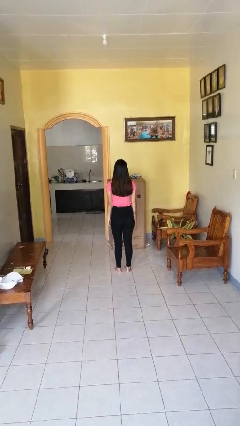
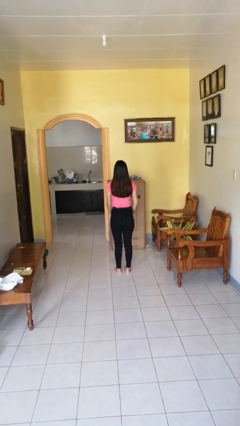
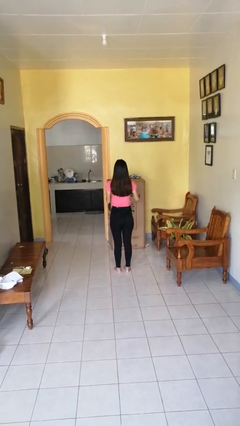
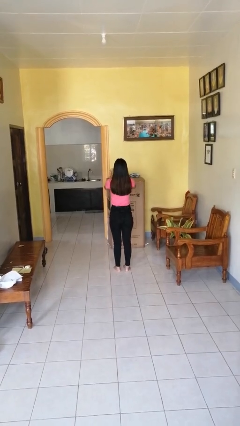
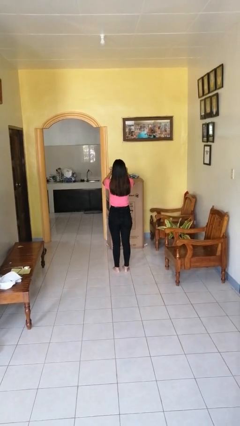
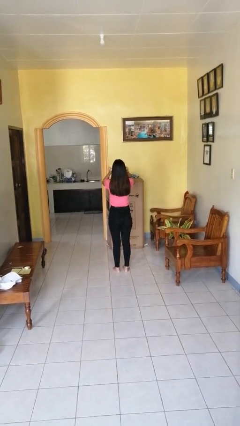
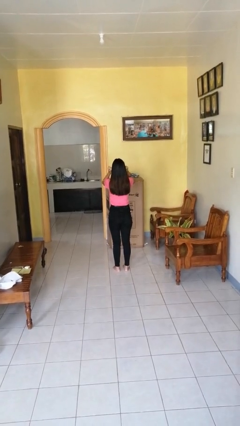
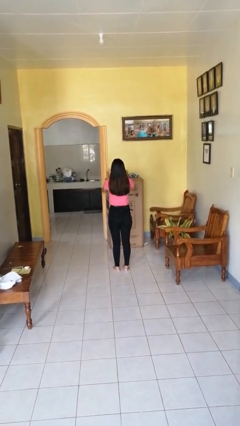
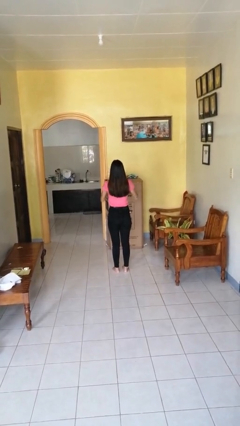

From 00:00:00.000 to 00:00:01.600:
person puts fingers in ear

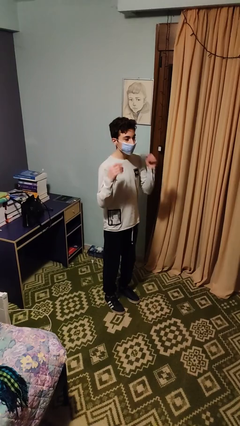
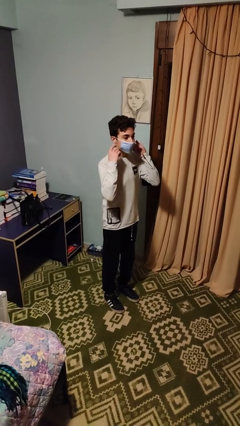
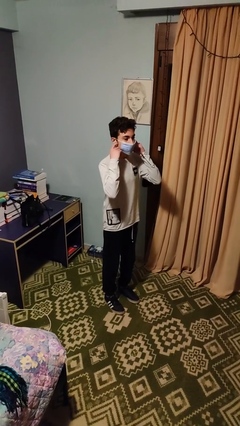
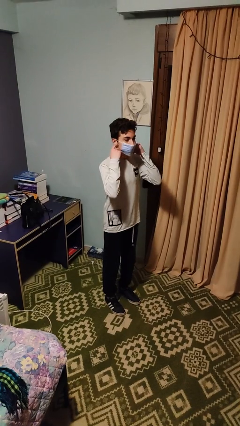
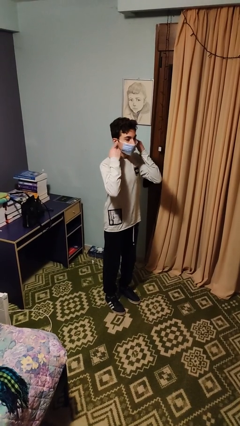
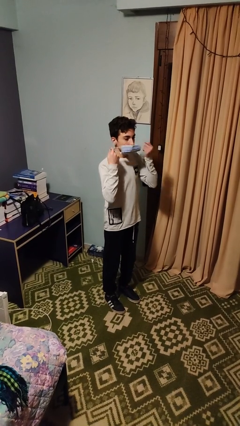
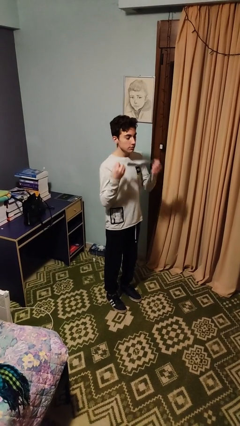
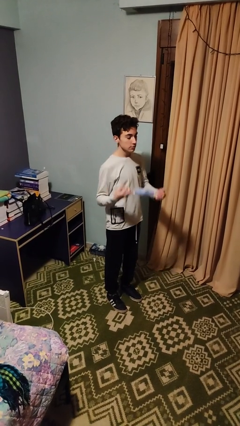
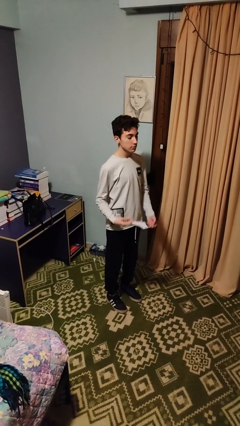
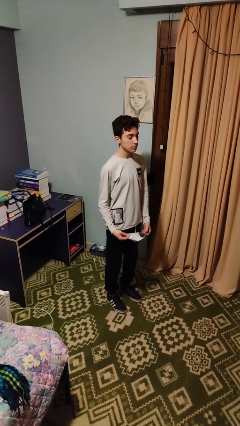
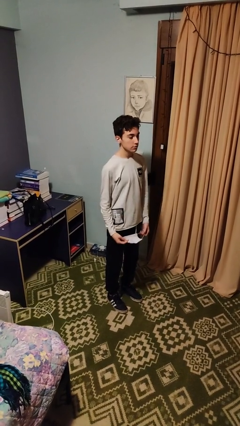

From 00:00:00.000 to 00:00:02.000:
person takes off facemask

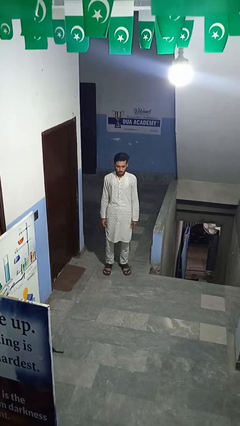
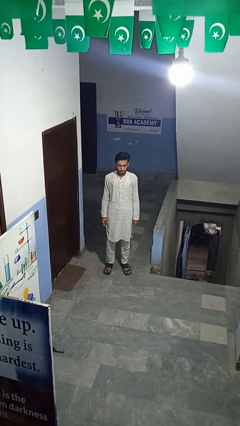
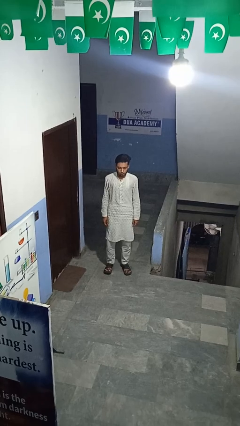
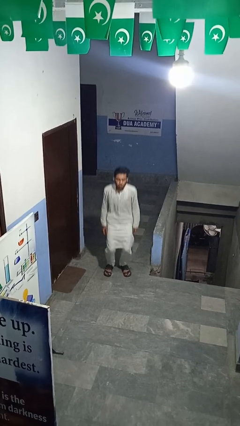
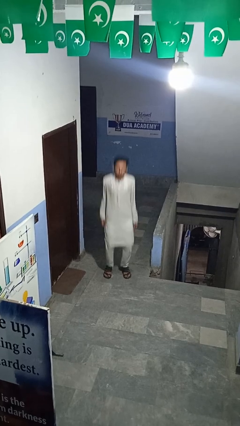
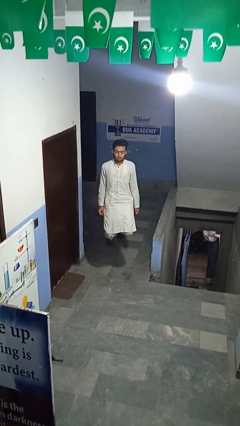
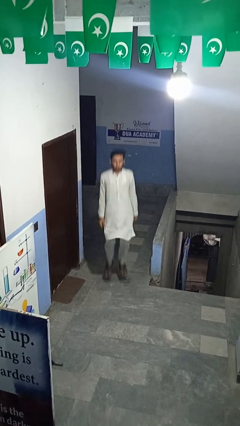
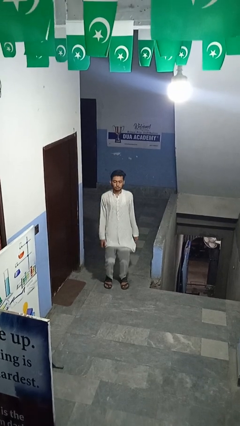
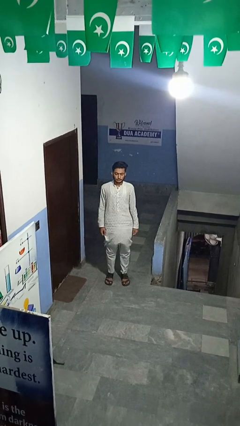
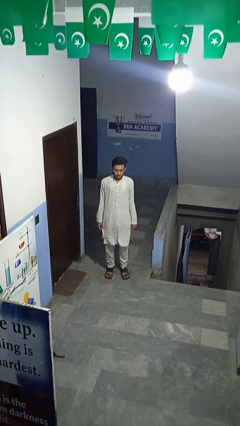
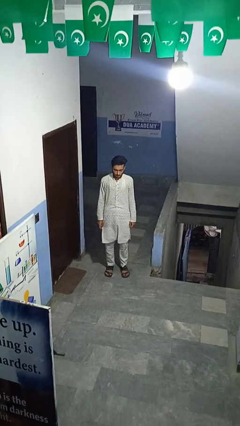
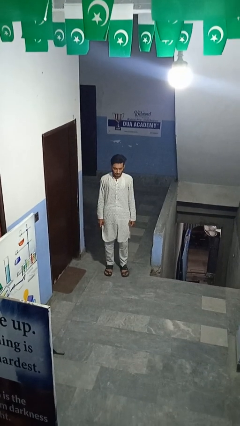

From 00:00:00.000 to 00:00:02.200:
person jumps

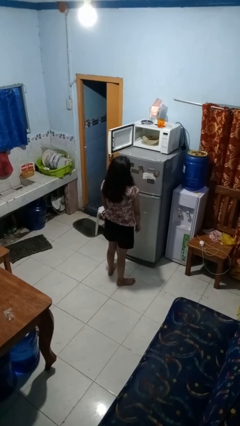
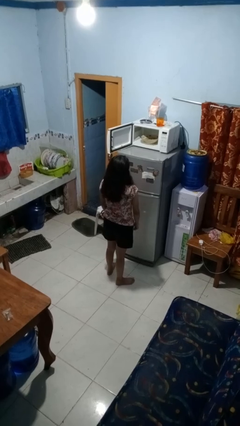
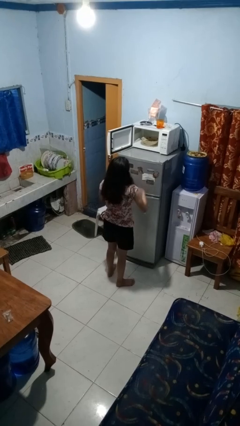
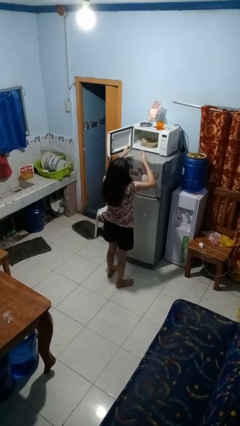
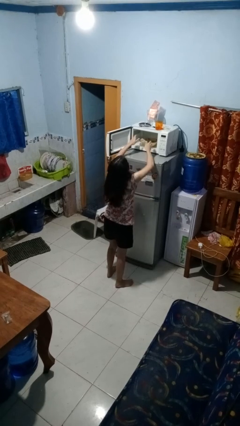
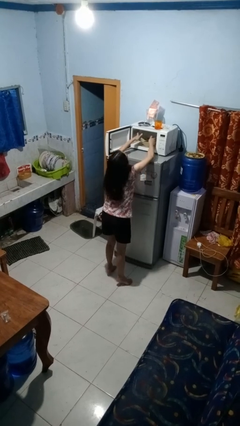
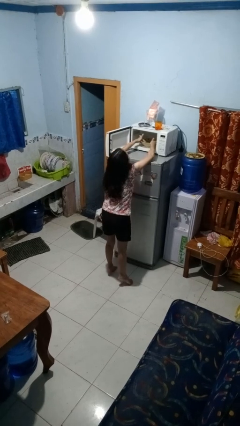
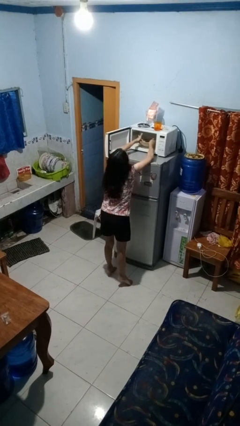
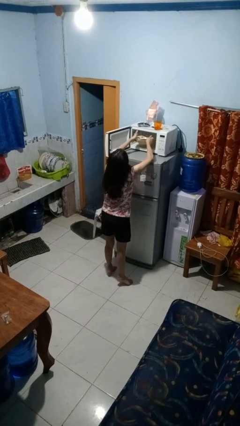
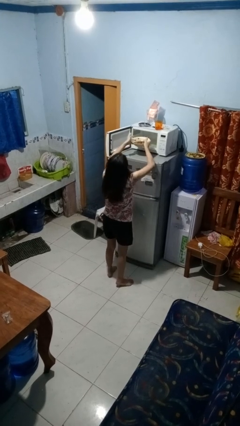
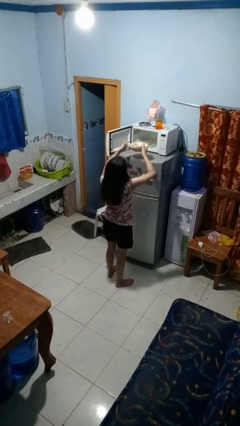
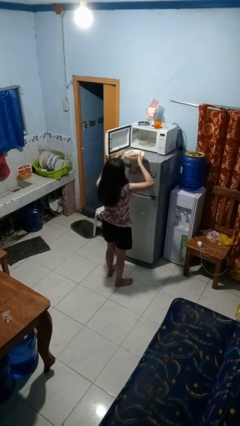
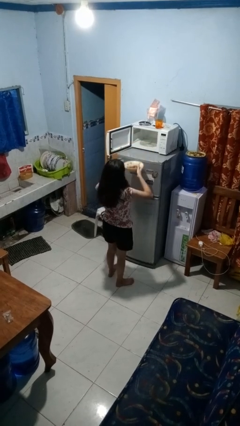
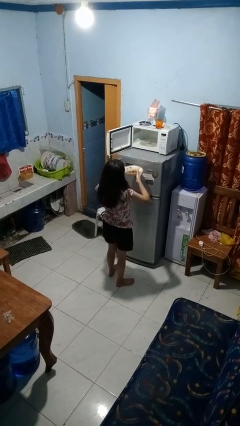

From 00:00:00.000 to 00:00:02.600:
person takes object from microwave

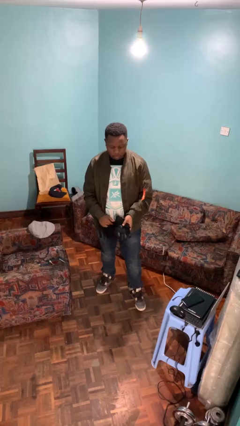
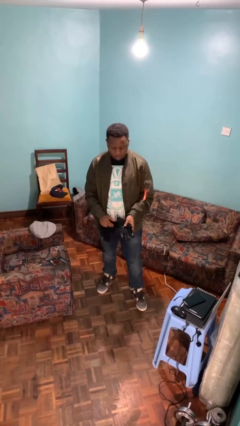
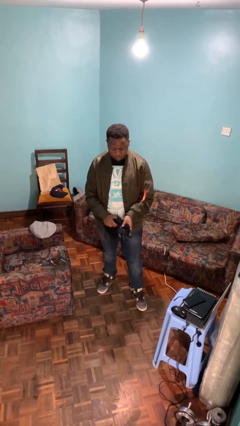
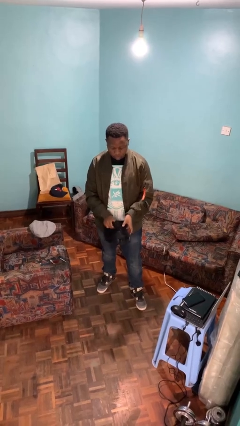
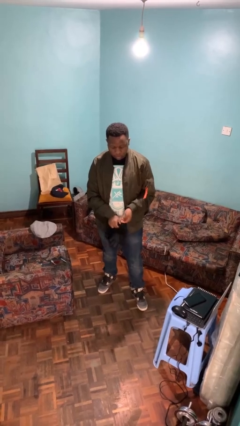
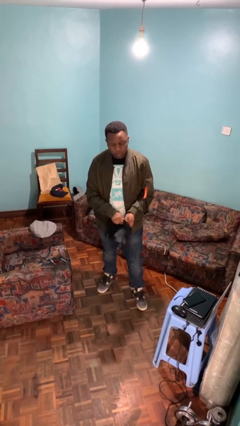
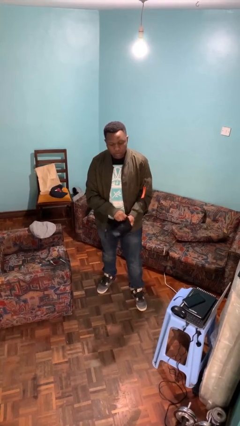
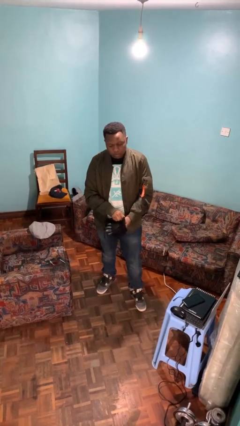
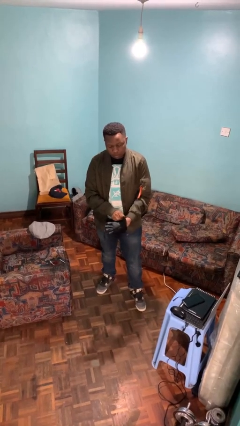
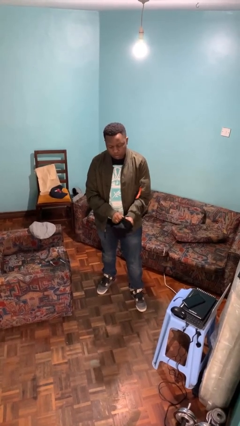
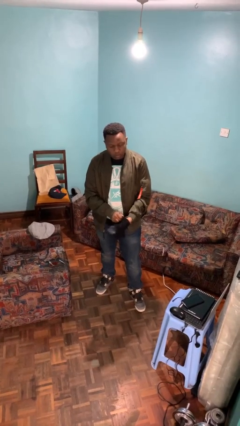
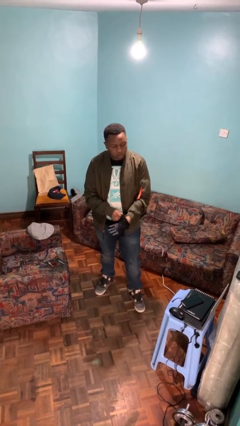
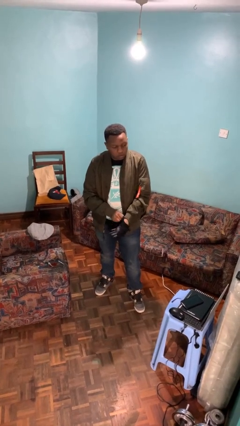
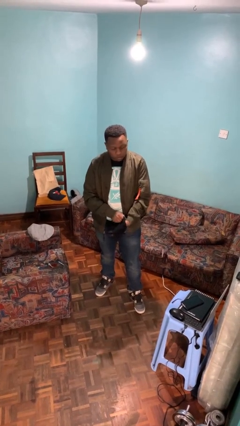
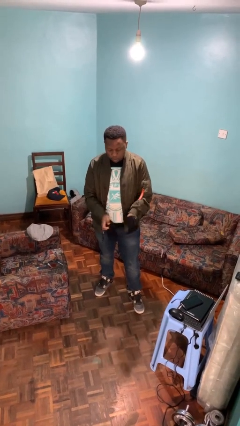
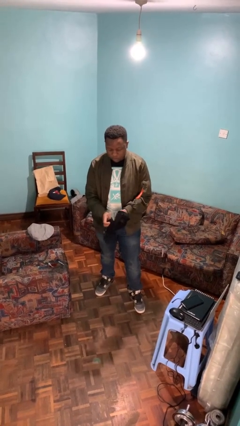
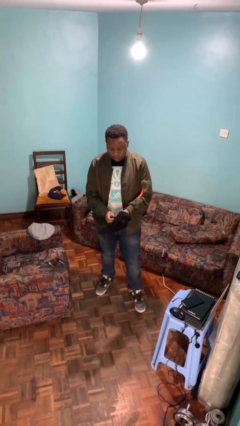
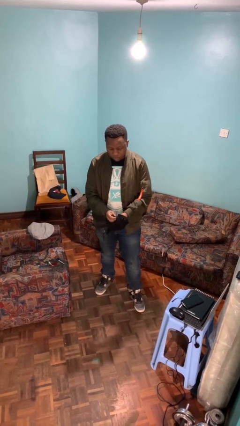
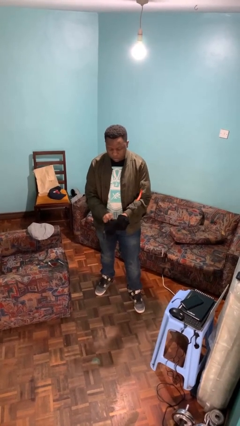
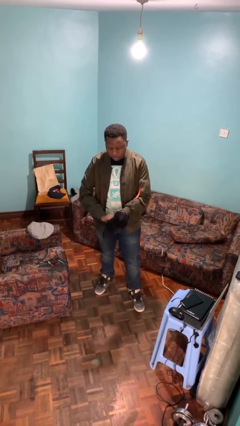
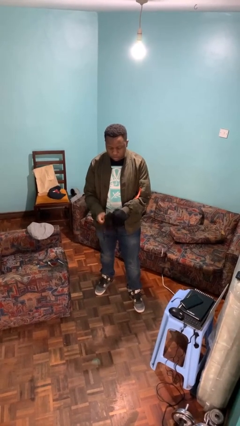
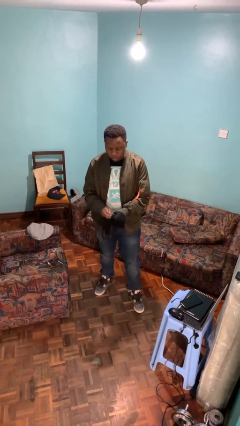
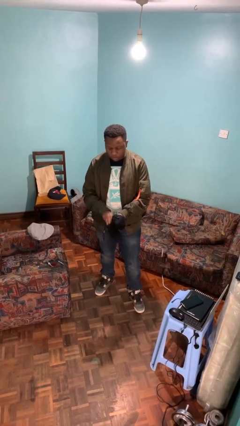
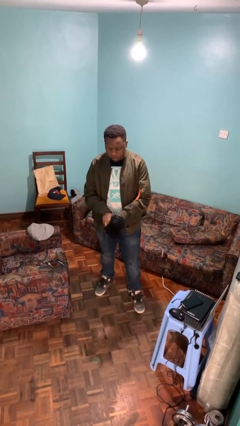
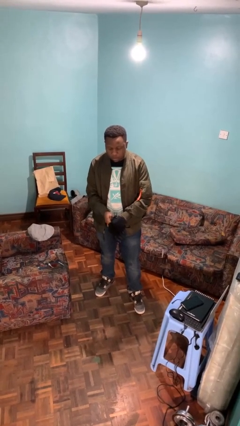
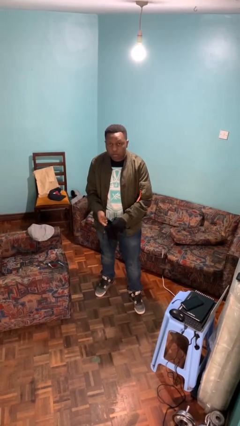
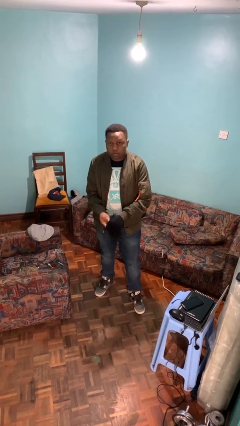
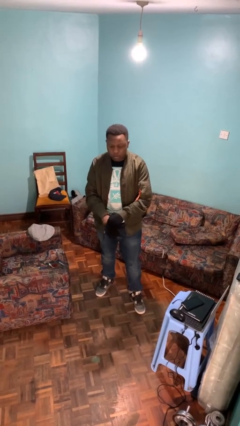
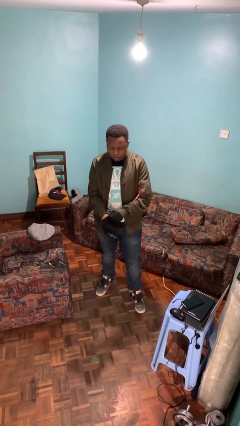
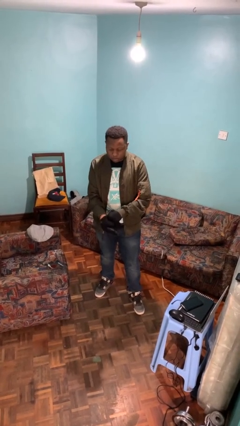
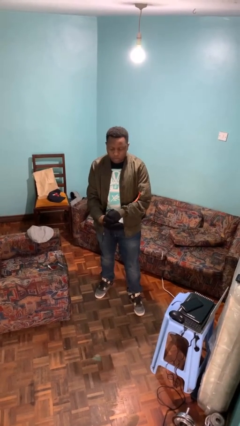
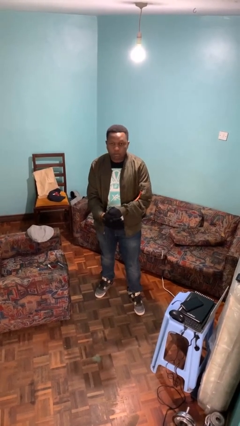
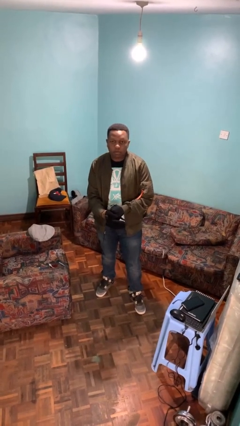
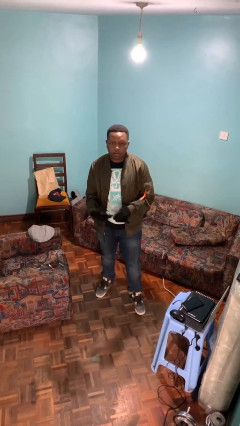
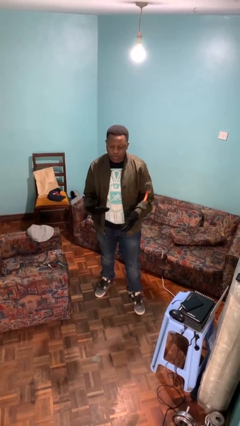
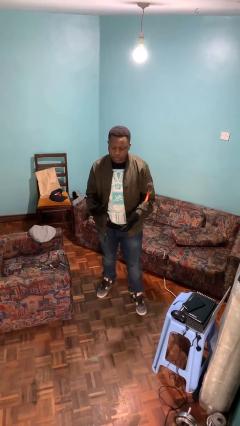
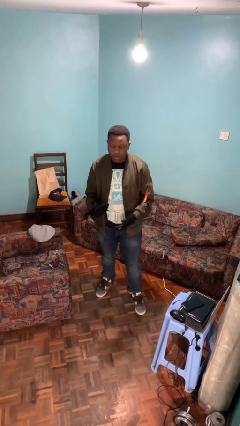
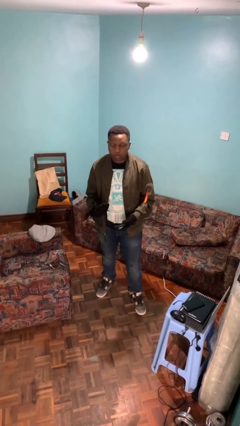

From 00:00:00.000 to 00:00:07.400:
person puts on gloves

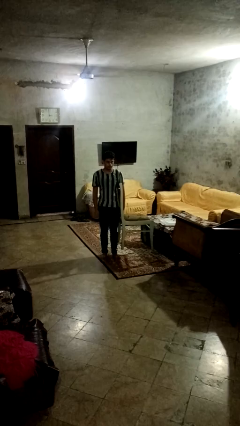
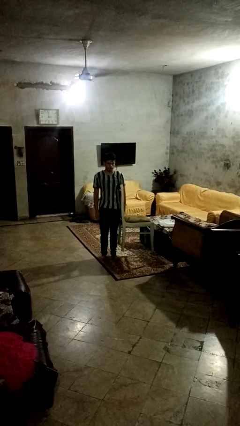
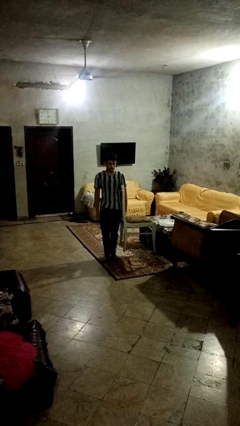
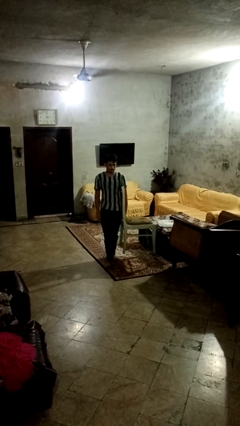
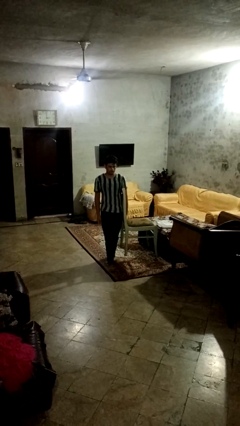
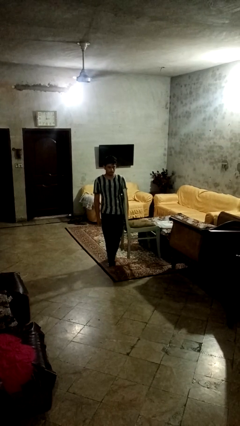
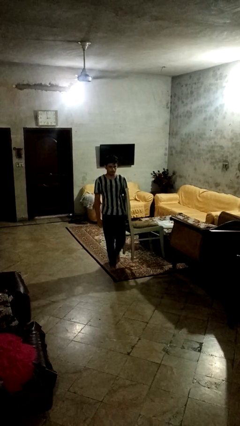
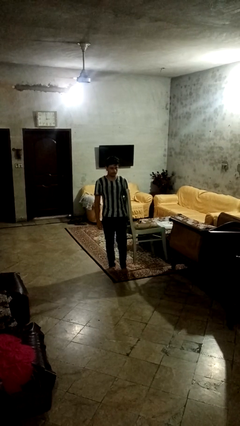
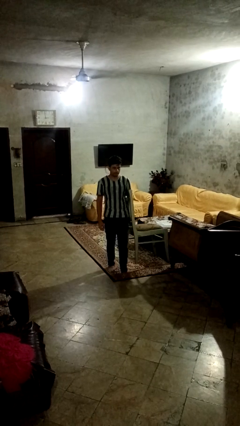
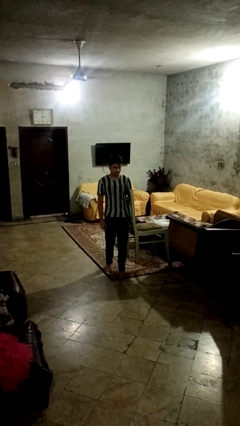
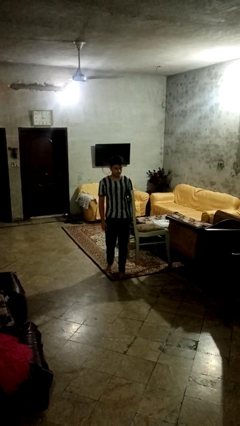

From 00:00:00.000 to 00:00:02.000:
person carries furniture
